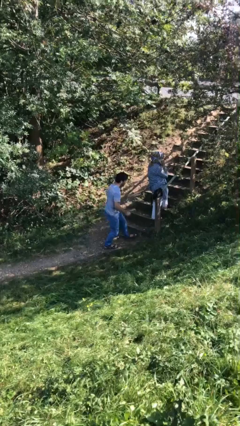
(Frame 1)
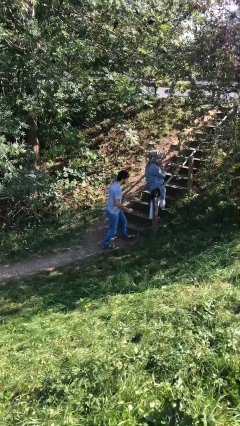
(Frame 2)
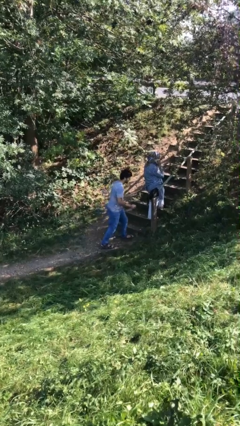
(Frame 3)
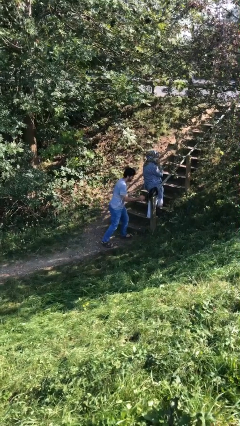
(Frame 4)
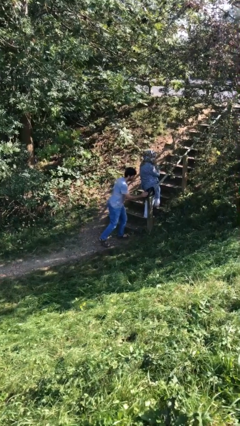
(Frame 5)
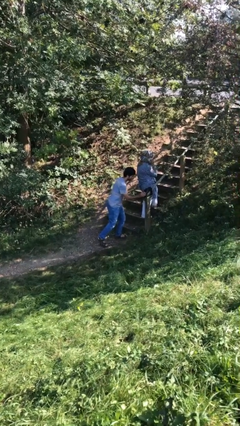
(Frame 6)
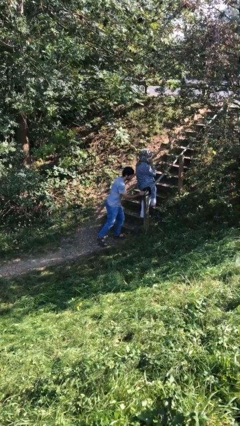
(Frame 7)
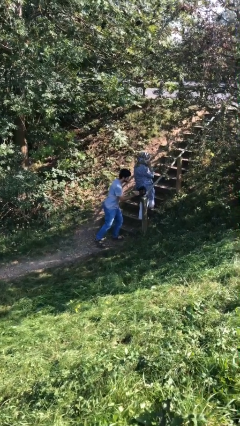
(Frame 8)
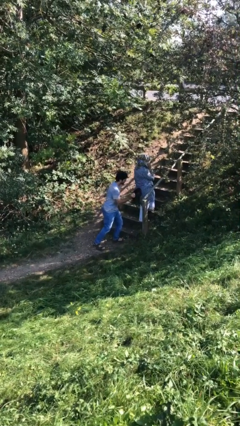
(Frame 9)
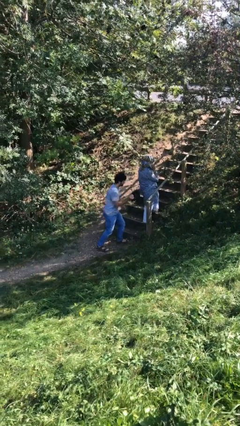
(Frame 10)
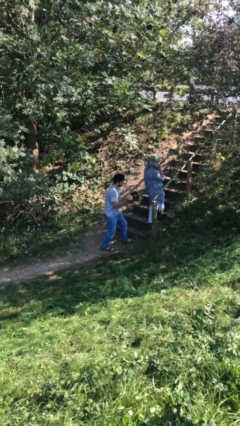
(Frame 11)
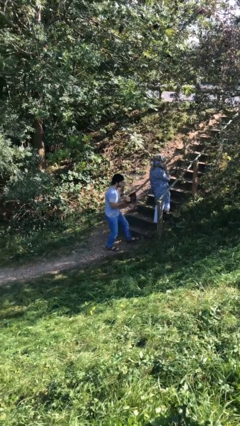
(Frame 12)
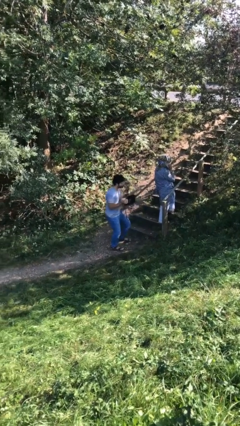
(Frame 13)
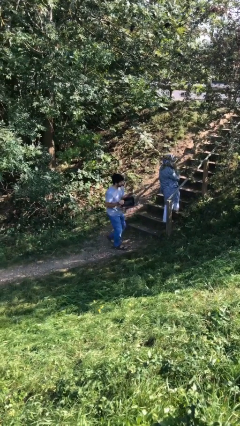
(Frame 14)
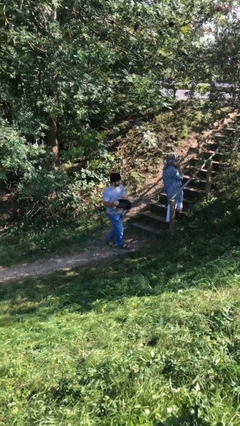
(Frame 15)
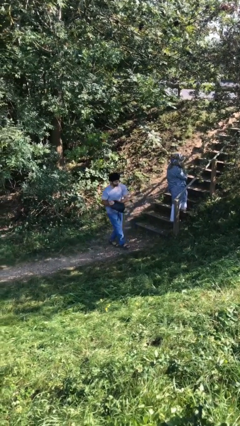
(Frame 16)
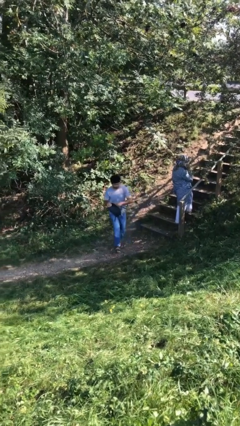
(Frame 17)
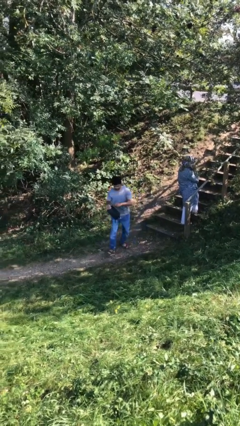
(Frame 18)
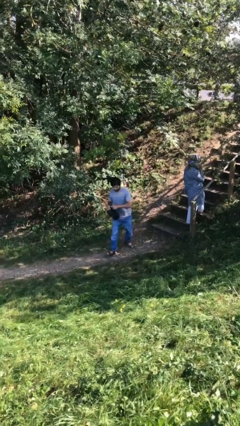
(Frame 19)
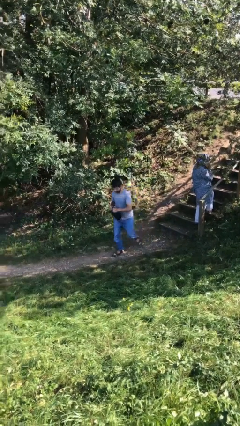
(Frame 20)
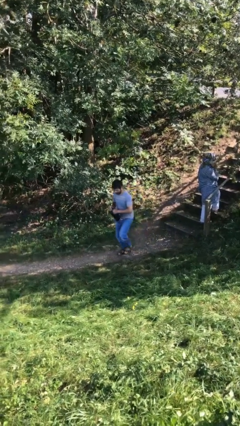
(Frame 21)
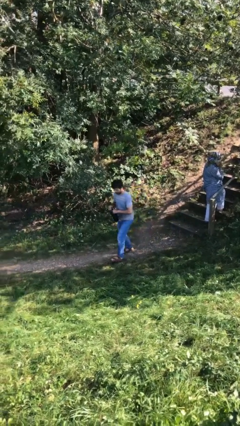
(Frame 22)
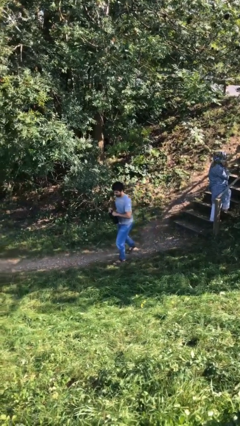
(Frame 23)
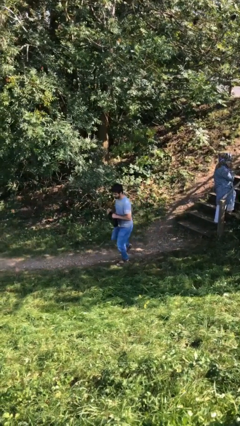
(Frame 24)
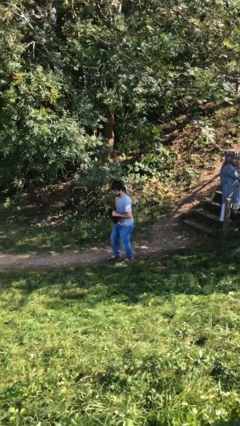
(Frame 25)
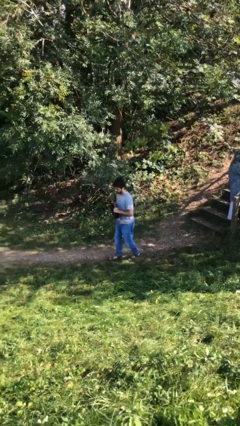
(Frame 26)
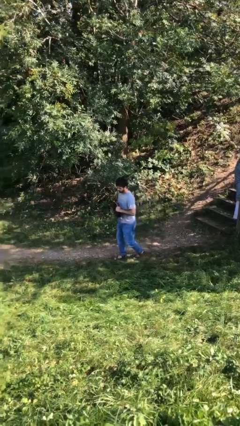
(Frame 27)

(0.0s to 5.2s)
person steals object from person

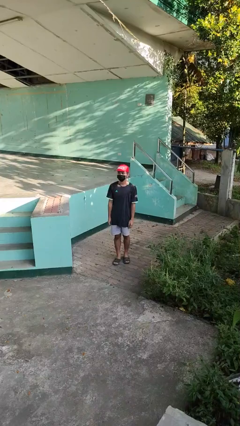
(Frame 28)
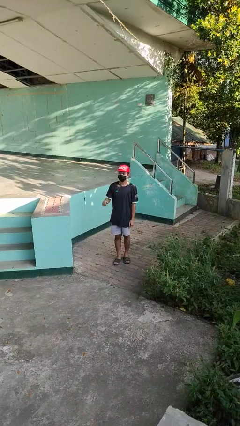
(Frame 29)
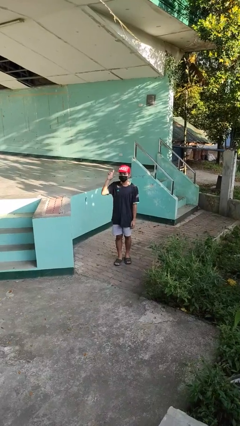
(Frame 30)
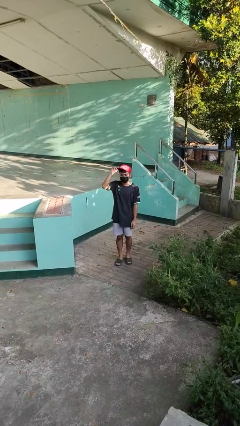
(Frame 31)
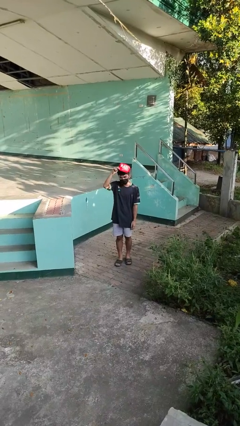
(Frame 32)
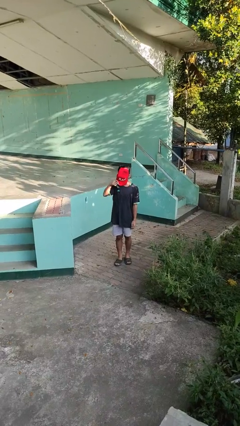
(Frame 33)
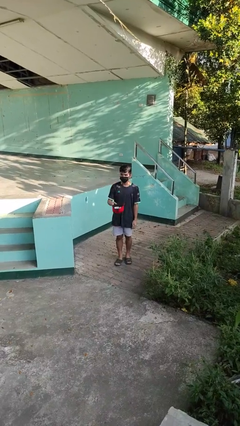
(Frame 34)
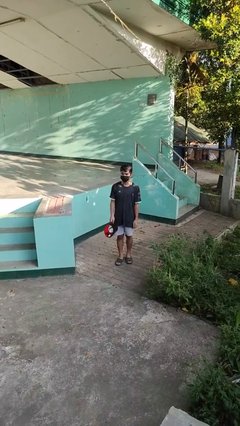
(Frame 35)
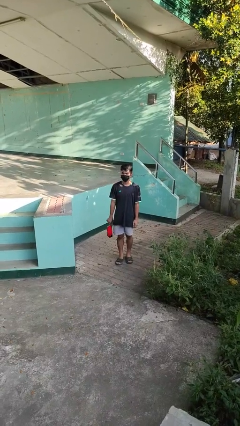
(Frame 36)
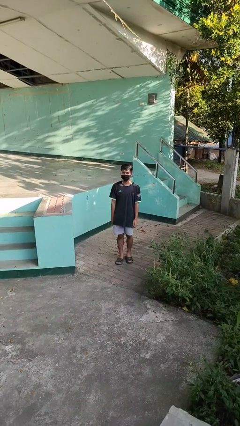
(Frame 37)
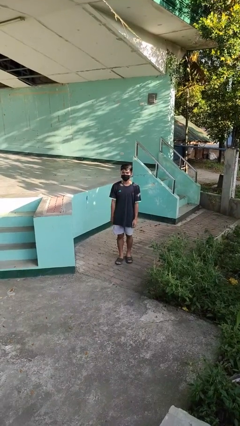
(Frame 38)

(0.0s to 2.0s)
person takes off hat

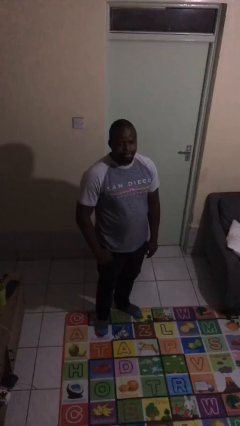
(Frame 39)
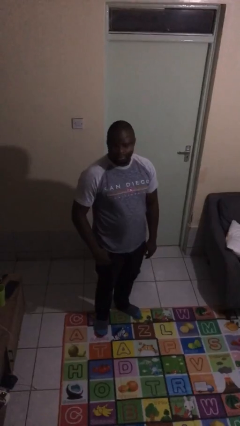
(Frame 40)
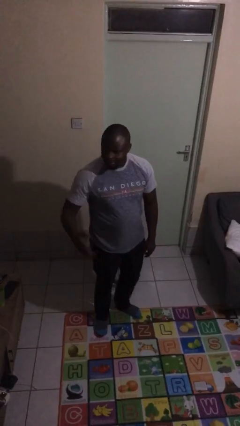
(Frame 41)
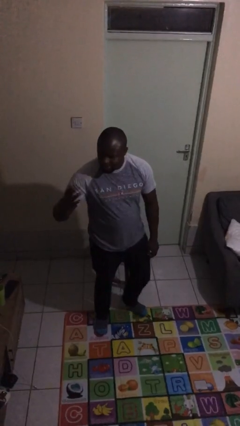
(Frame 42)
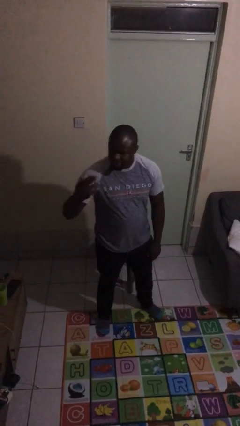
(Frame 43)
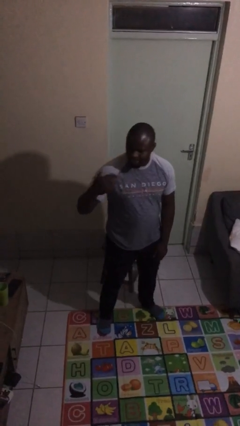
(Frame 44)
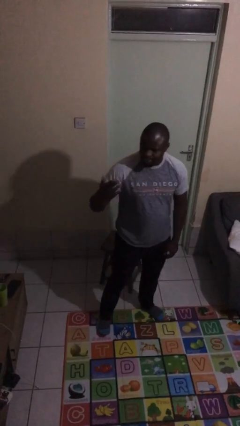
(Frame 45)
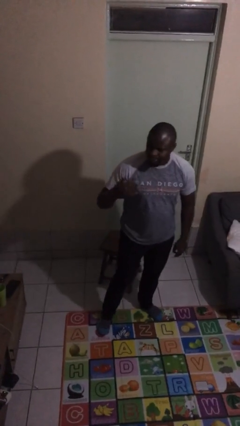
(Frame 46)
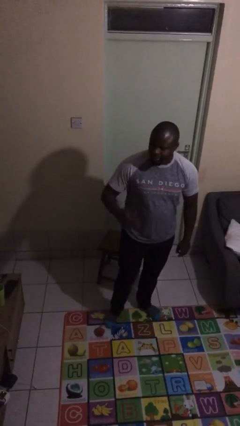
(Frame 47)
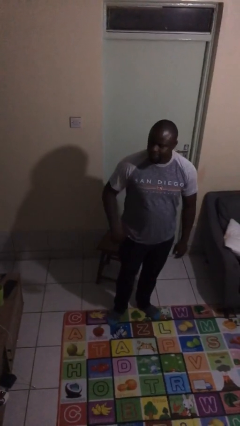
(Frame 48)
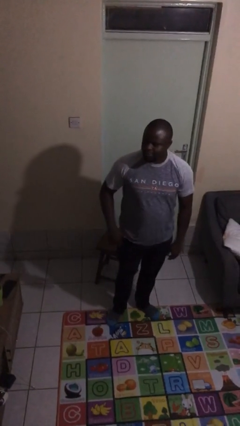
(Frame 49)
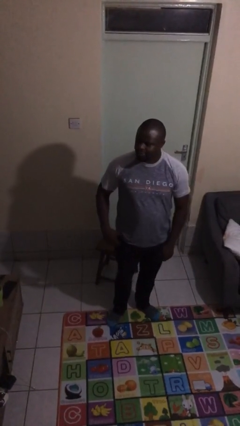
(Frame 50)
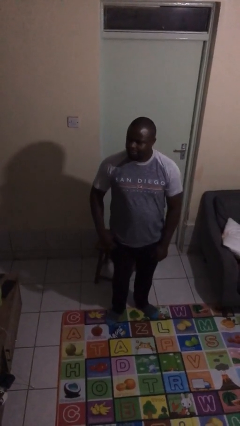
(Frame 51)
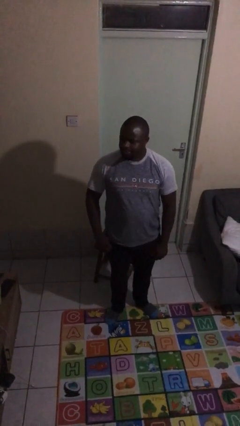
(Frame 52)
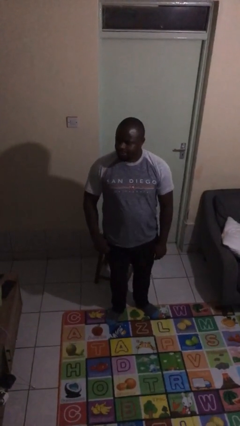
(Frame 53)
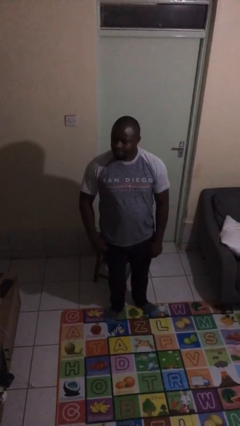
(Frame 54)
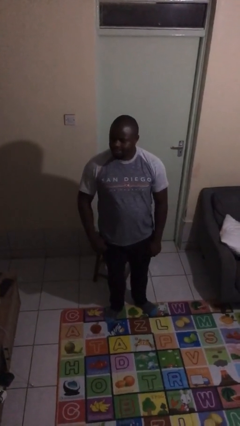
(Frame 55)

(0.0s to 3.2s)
person gestures come here

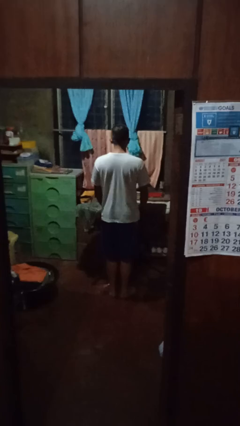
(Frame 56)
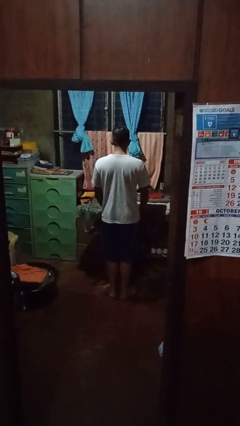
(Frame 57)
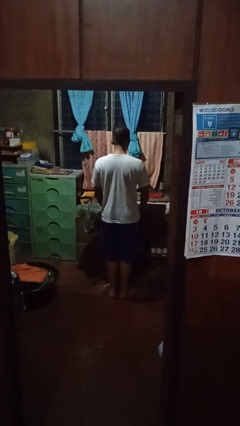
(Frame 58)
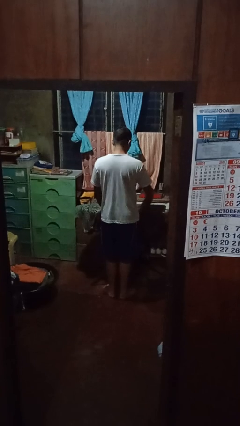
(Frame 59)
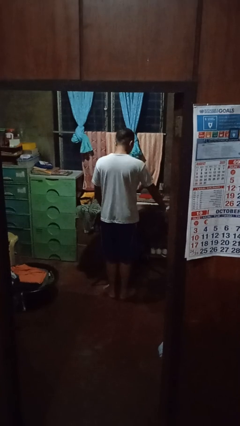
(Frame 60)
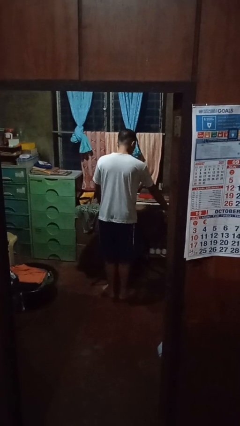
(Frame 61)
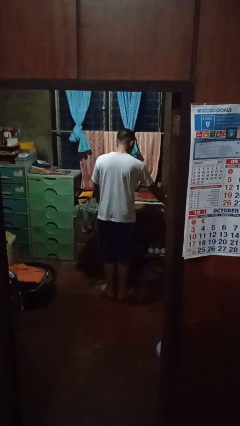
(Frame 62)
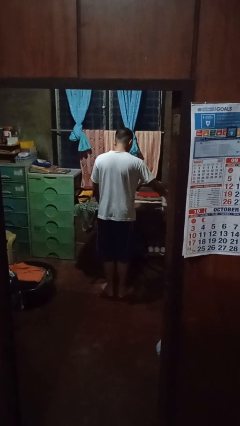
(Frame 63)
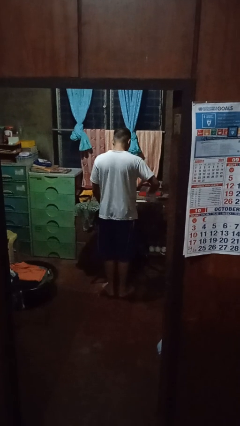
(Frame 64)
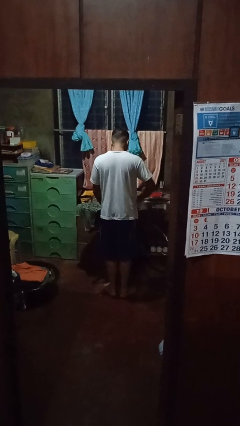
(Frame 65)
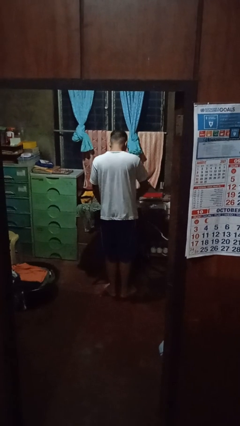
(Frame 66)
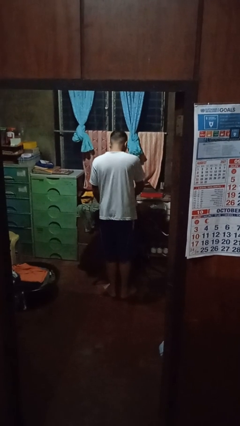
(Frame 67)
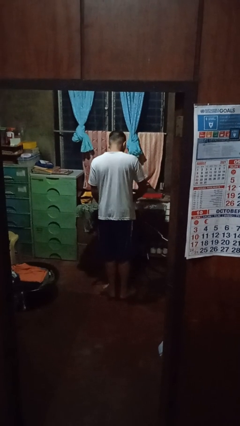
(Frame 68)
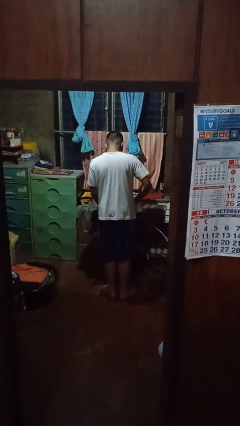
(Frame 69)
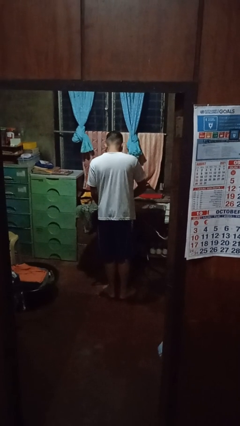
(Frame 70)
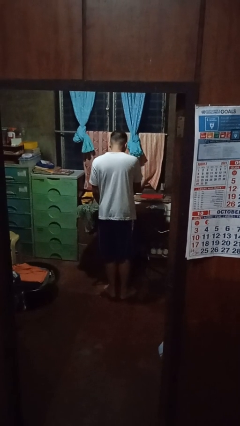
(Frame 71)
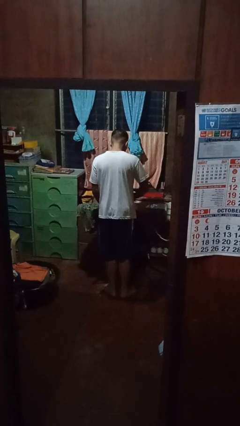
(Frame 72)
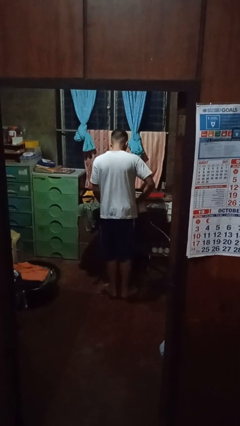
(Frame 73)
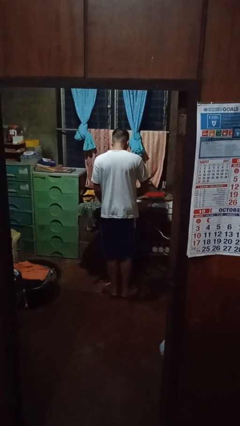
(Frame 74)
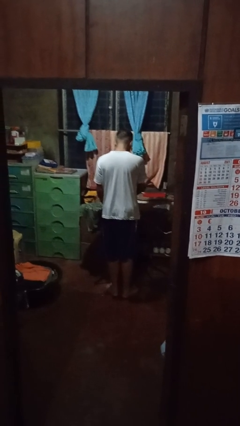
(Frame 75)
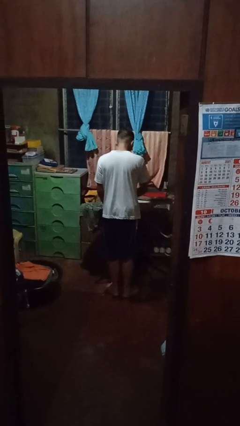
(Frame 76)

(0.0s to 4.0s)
person irons clothes

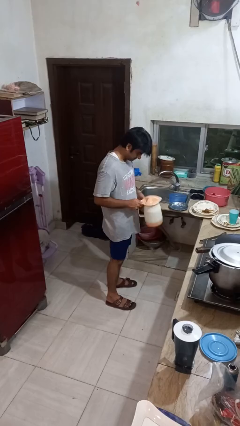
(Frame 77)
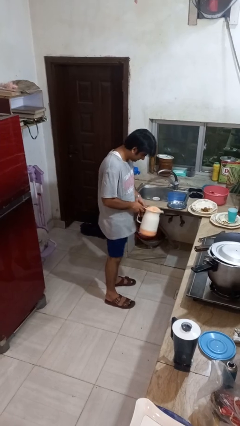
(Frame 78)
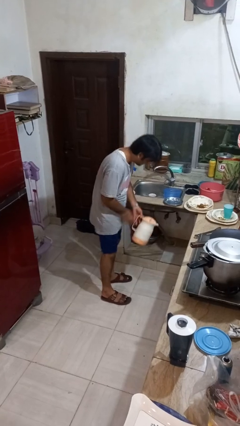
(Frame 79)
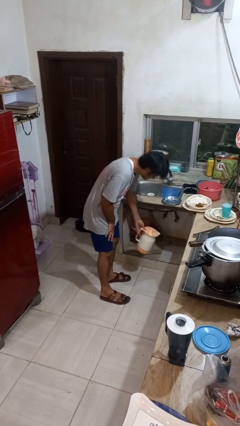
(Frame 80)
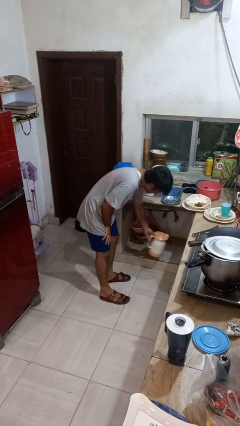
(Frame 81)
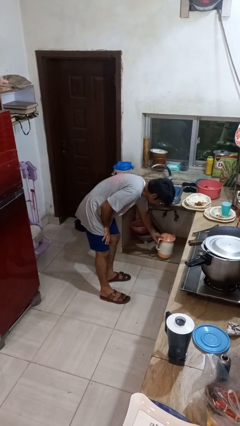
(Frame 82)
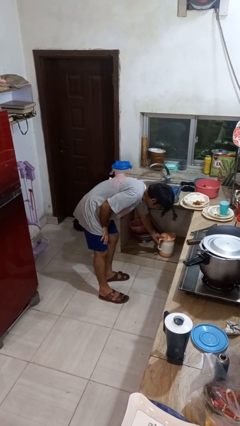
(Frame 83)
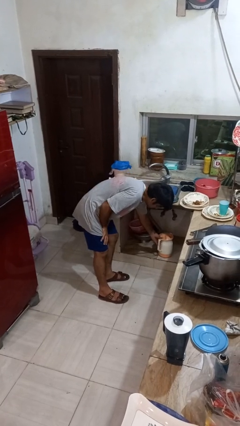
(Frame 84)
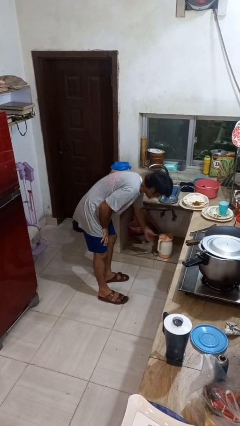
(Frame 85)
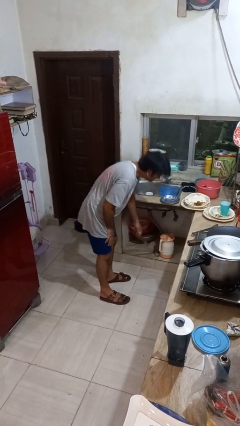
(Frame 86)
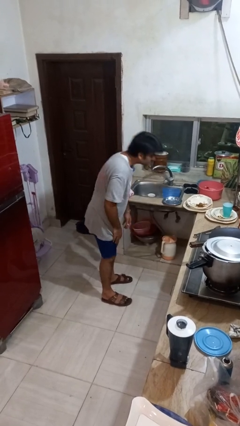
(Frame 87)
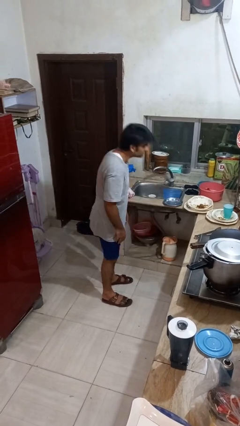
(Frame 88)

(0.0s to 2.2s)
person puts down object into cabinet

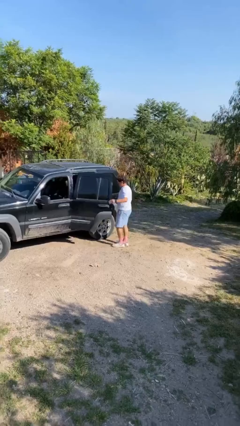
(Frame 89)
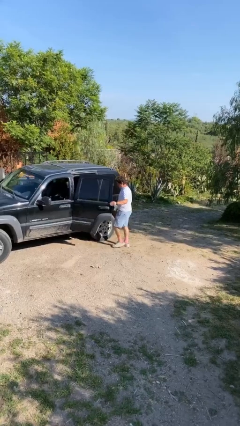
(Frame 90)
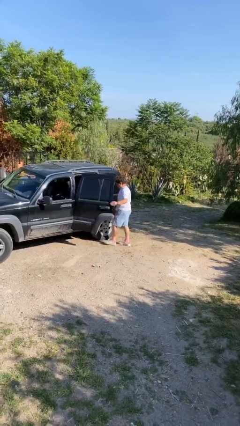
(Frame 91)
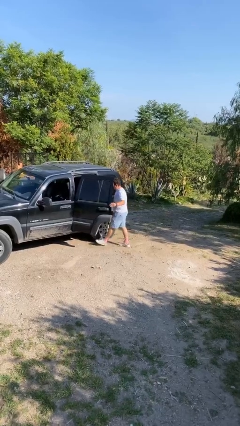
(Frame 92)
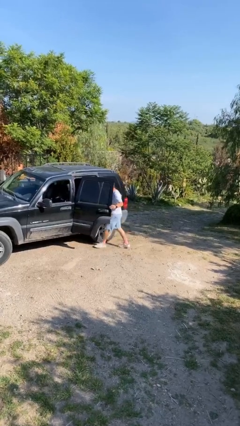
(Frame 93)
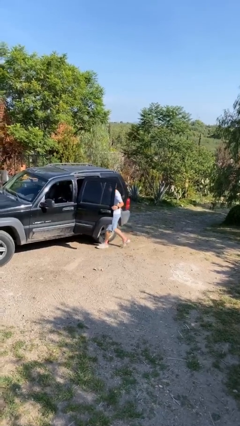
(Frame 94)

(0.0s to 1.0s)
person opens car door
